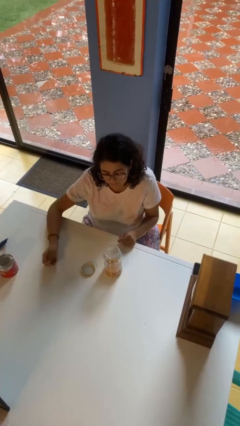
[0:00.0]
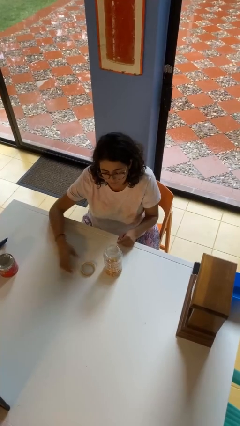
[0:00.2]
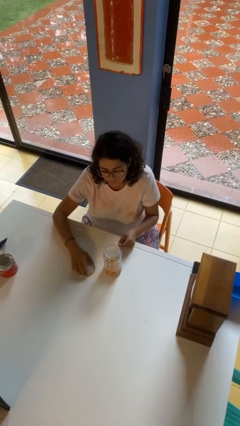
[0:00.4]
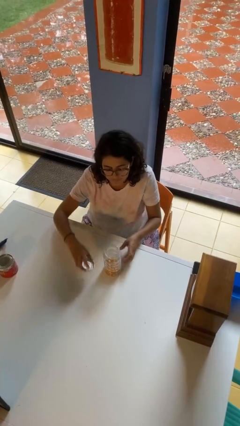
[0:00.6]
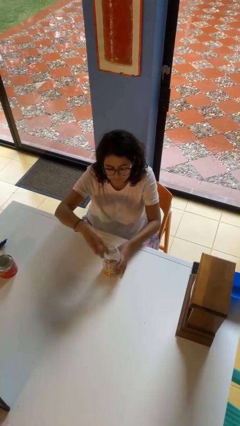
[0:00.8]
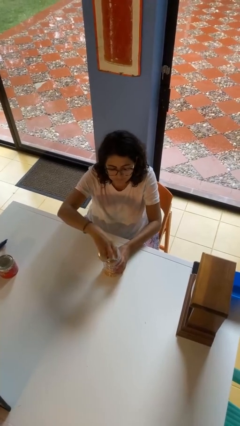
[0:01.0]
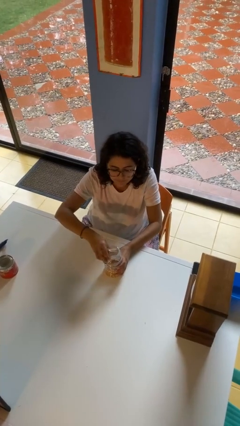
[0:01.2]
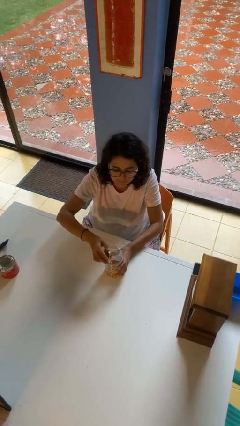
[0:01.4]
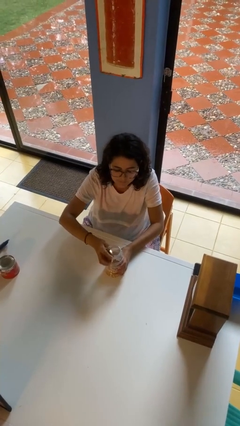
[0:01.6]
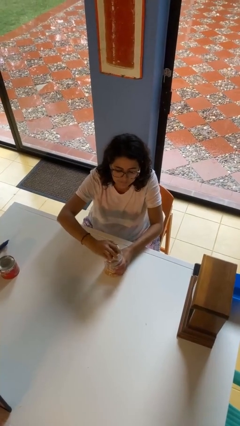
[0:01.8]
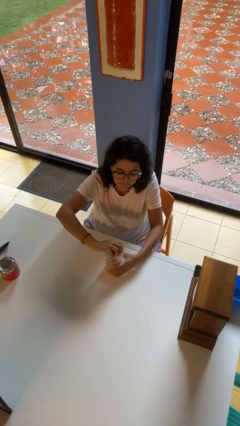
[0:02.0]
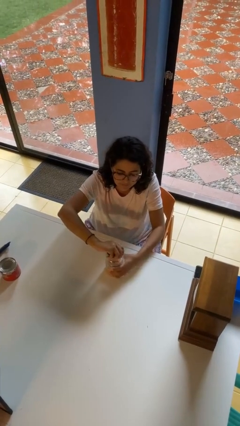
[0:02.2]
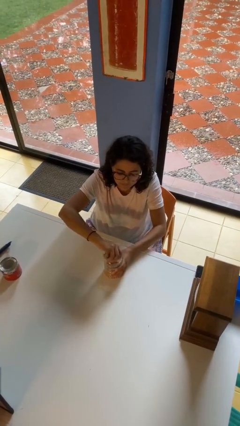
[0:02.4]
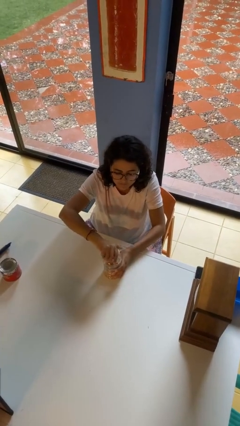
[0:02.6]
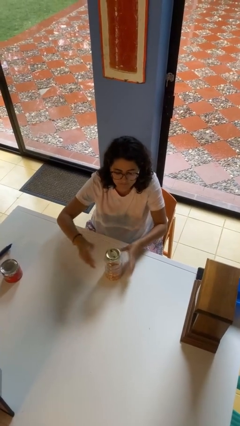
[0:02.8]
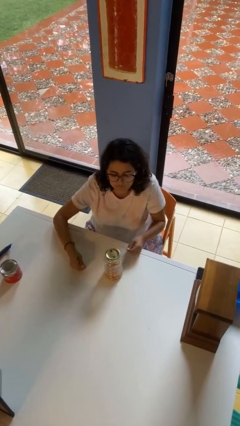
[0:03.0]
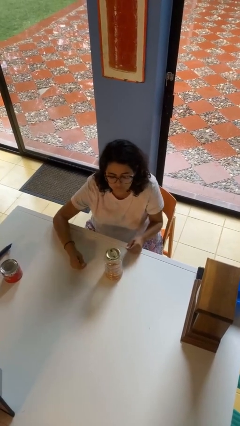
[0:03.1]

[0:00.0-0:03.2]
person closes jar

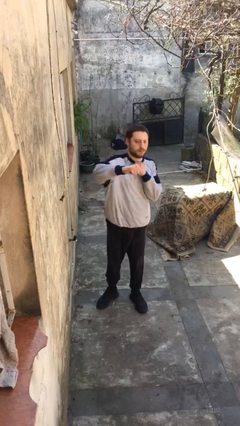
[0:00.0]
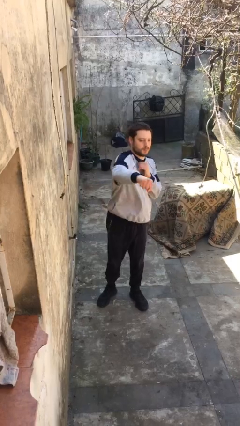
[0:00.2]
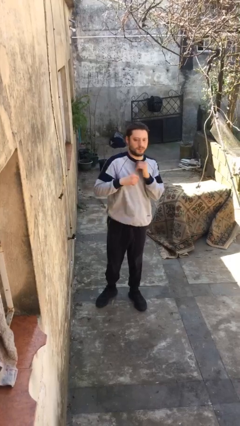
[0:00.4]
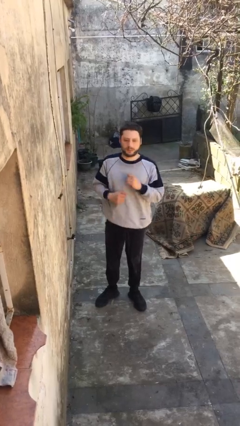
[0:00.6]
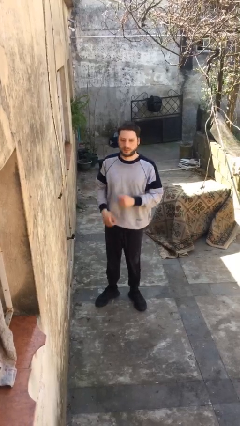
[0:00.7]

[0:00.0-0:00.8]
person punches

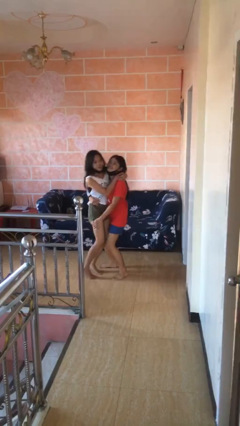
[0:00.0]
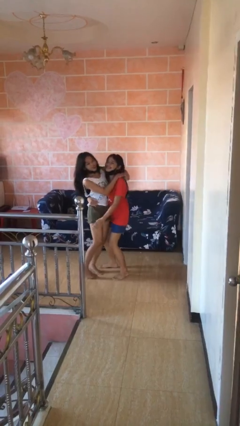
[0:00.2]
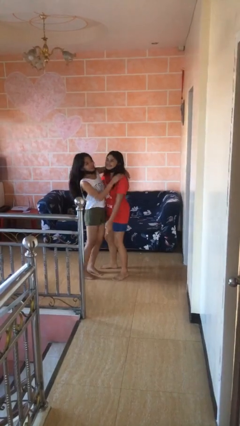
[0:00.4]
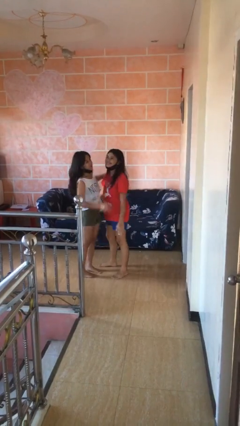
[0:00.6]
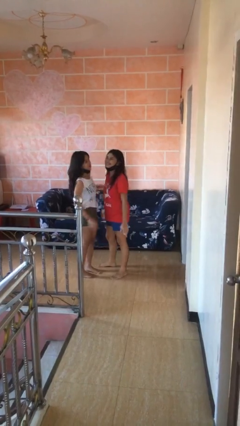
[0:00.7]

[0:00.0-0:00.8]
person puts down person

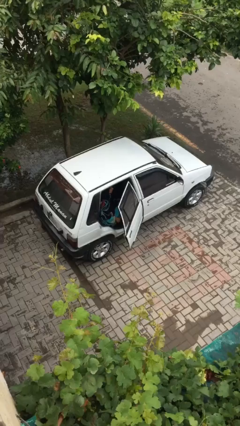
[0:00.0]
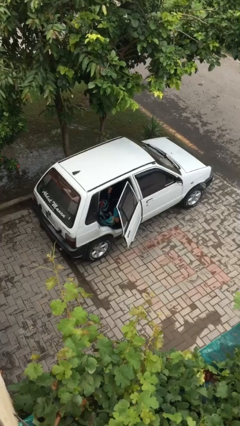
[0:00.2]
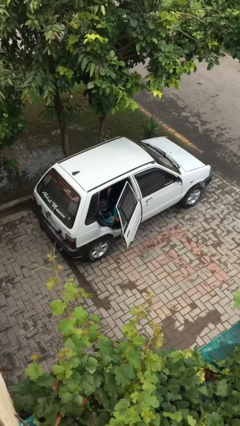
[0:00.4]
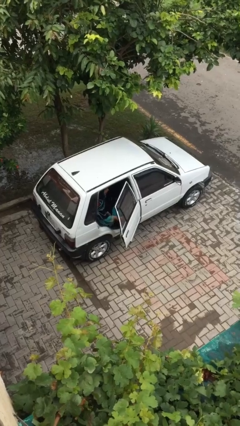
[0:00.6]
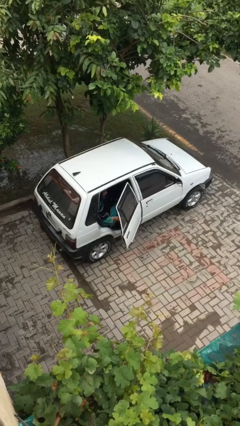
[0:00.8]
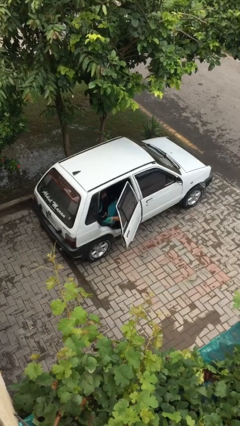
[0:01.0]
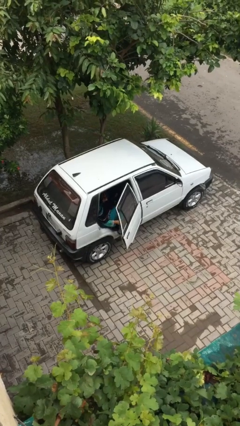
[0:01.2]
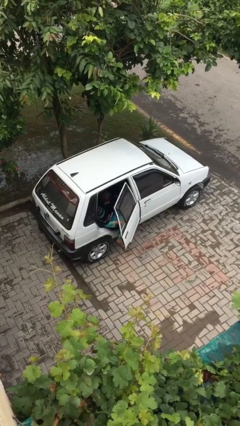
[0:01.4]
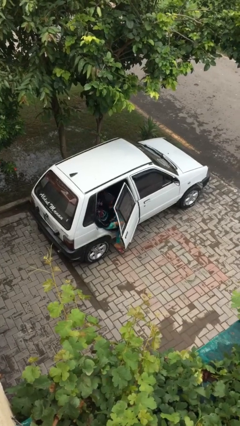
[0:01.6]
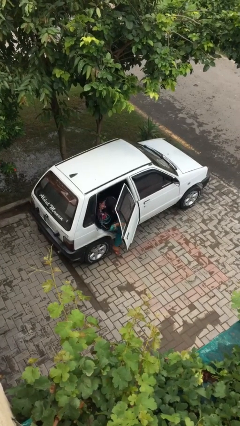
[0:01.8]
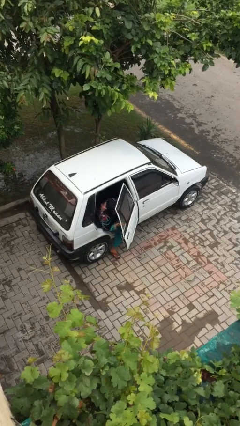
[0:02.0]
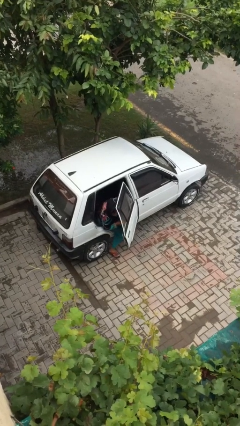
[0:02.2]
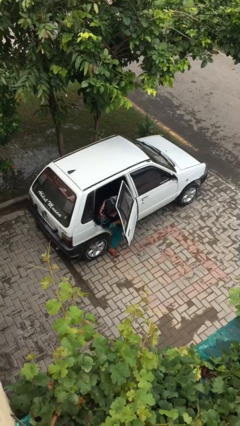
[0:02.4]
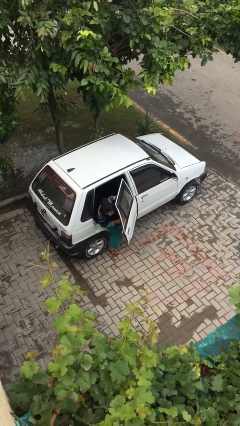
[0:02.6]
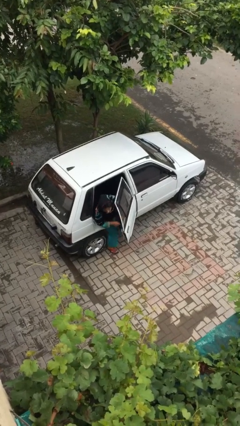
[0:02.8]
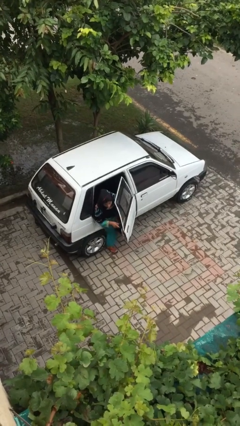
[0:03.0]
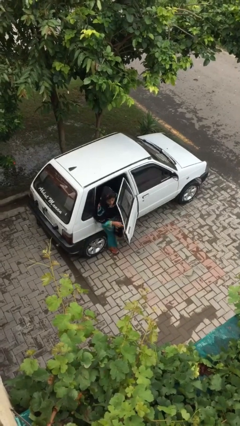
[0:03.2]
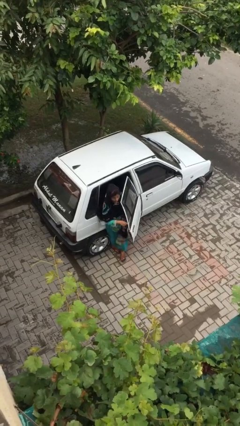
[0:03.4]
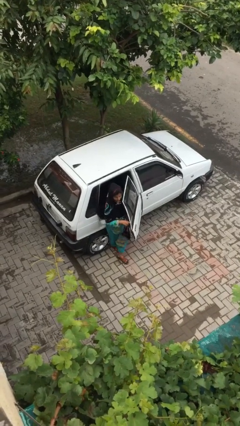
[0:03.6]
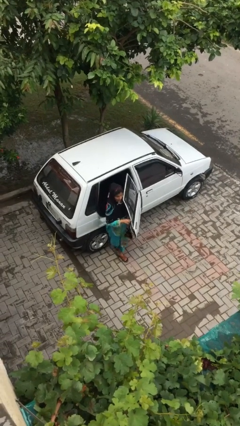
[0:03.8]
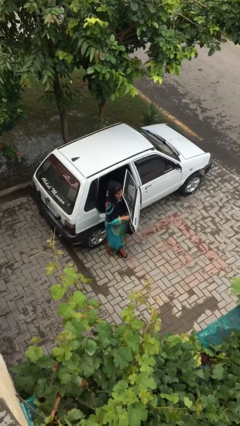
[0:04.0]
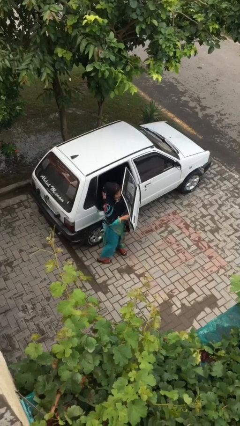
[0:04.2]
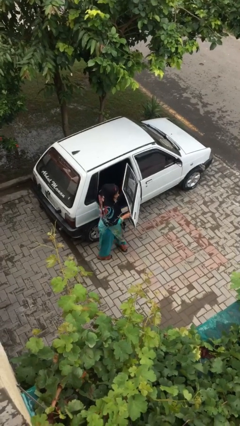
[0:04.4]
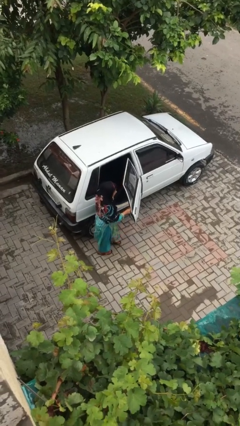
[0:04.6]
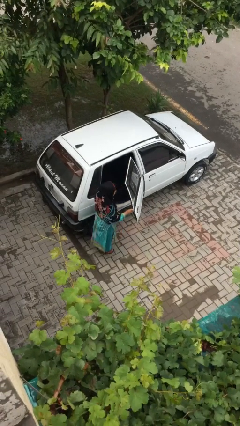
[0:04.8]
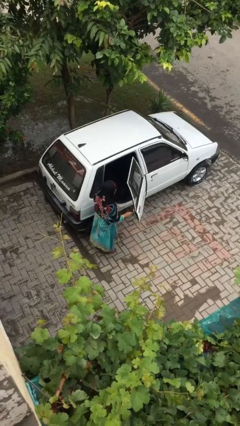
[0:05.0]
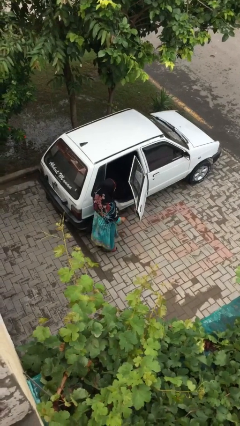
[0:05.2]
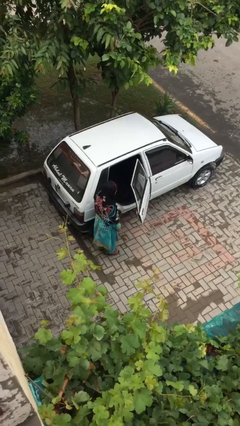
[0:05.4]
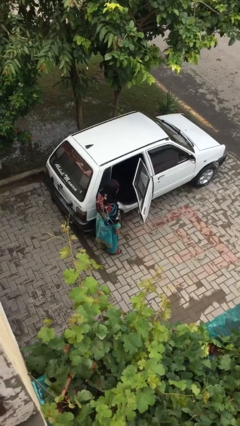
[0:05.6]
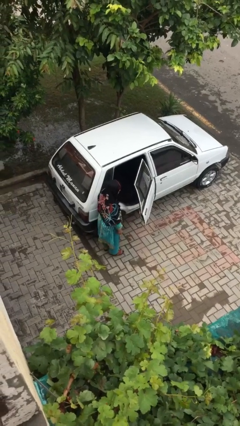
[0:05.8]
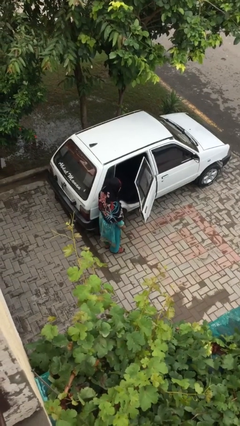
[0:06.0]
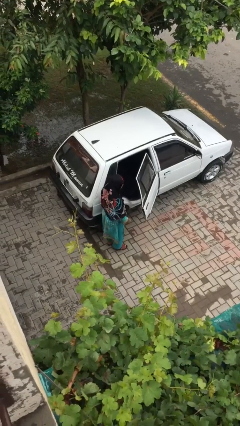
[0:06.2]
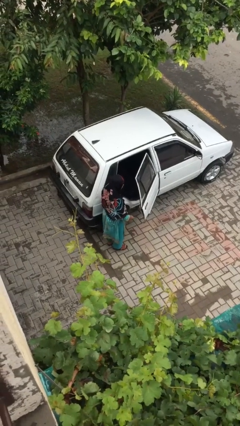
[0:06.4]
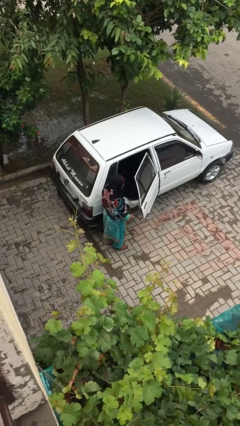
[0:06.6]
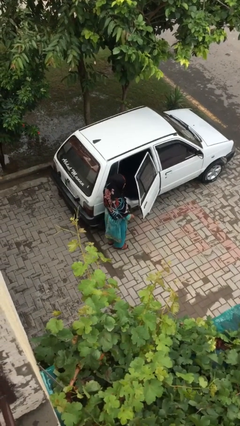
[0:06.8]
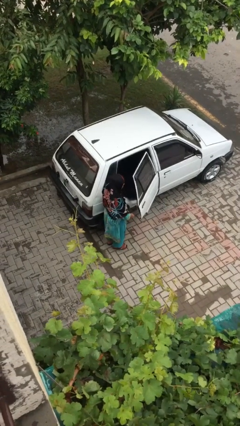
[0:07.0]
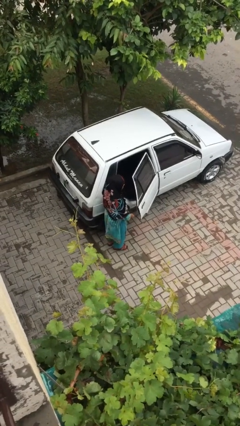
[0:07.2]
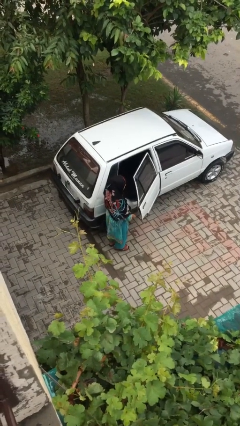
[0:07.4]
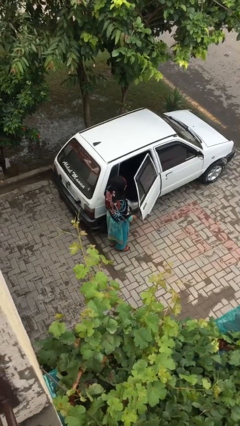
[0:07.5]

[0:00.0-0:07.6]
person exits car

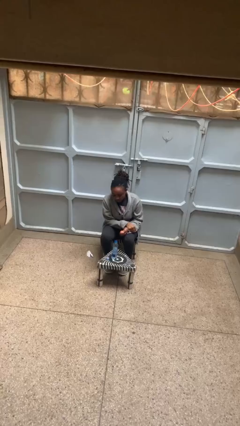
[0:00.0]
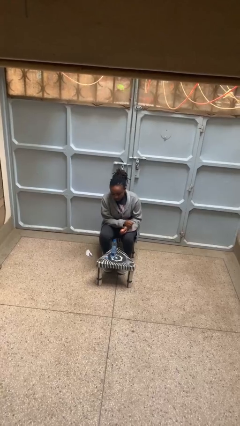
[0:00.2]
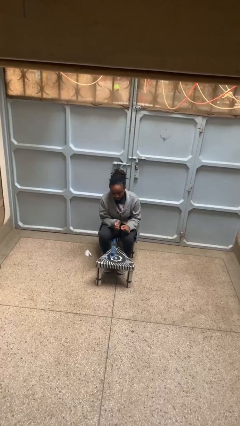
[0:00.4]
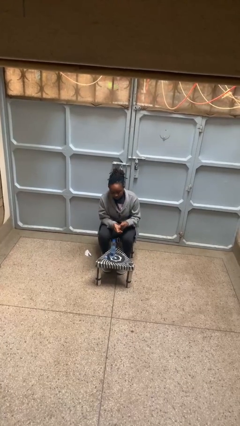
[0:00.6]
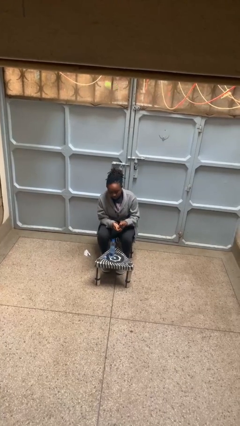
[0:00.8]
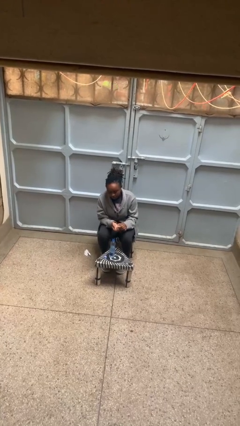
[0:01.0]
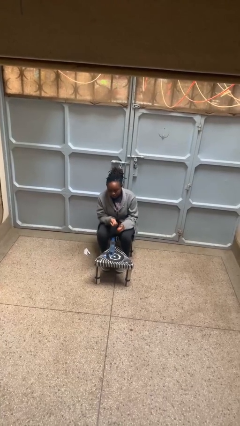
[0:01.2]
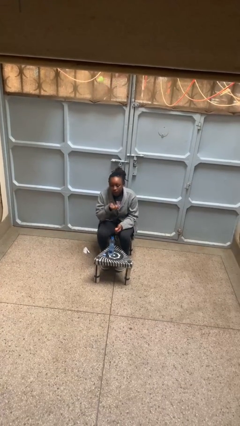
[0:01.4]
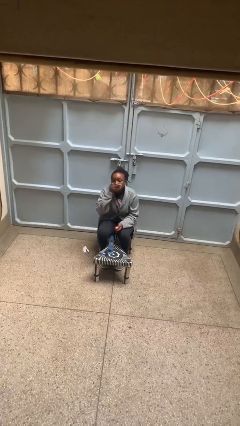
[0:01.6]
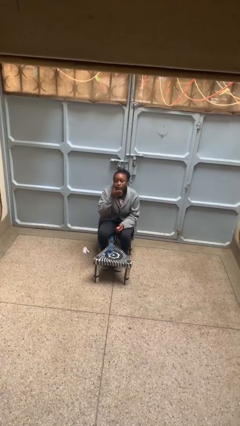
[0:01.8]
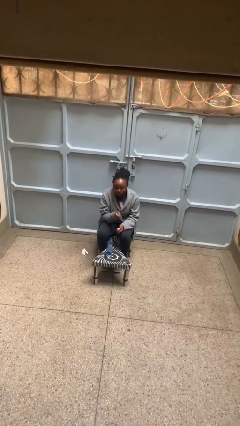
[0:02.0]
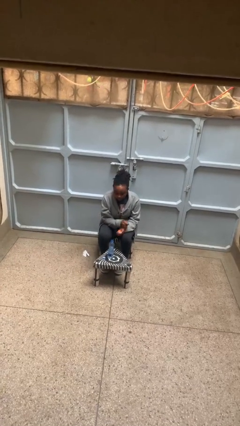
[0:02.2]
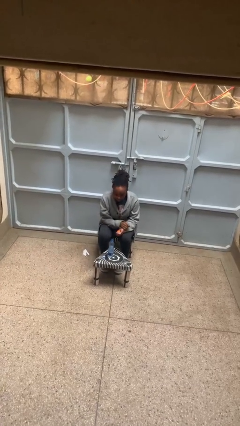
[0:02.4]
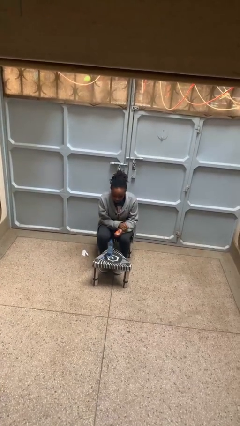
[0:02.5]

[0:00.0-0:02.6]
person takes medicine pills

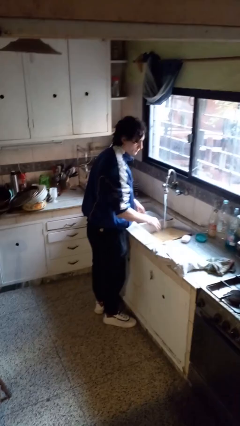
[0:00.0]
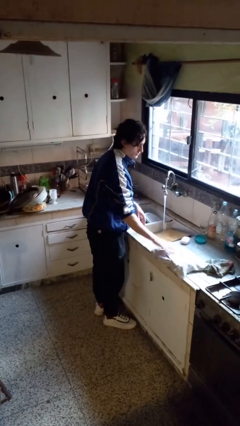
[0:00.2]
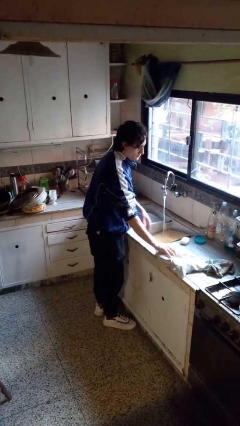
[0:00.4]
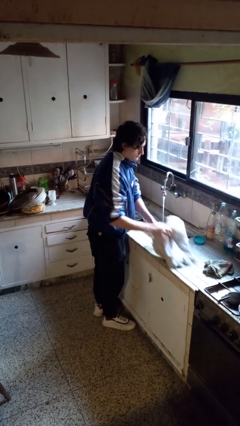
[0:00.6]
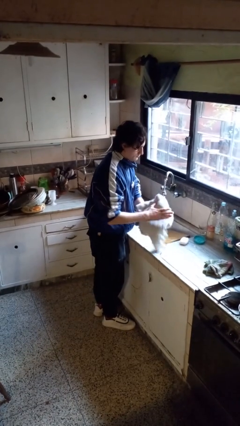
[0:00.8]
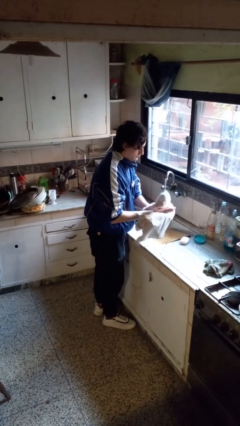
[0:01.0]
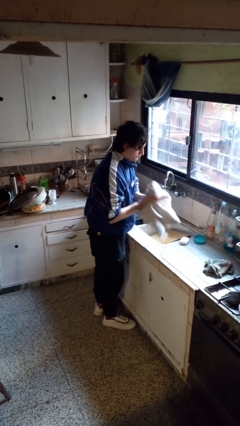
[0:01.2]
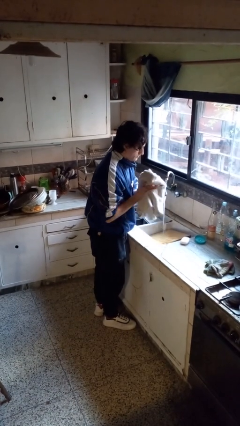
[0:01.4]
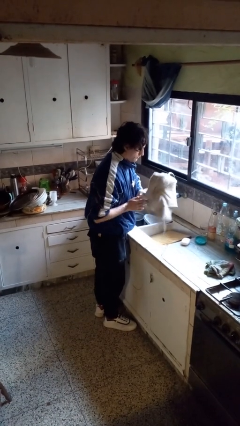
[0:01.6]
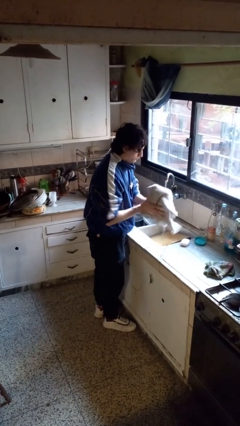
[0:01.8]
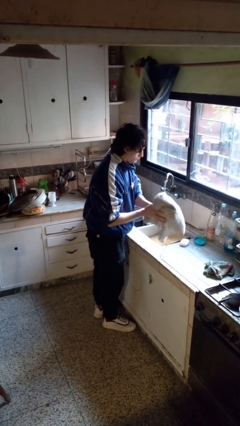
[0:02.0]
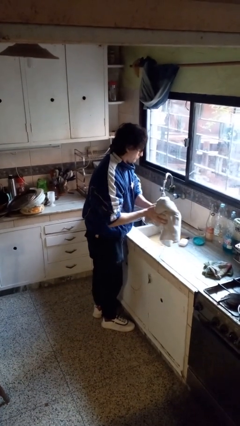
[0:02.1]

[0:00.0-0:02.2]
person dries hands with towel

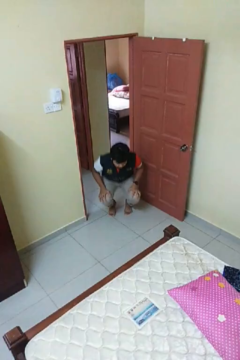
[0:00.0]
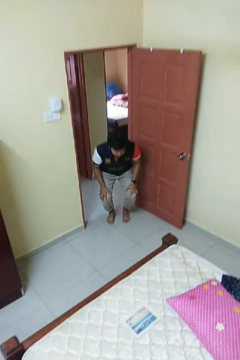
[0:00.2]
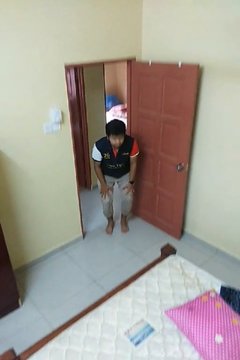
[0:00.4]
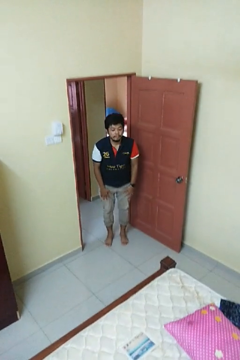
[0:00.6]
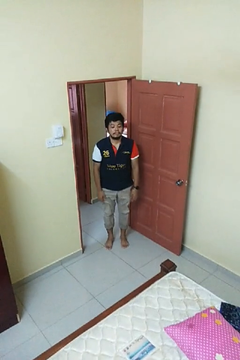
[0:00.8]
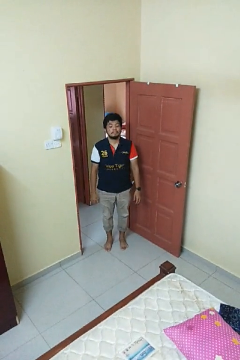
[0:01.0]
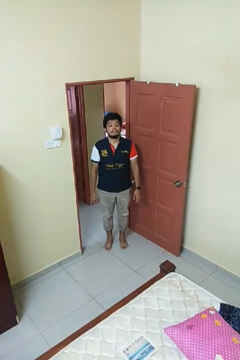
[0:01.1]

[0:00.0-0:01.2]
person stands up
